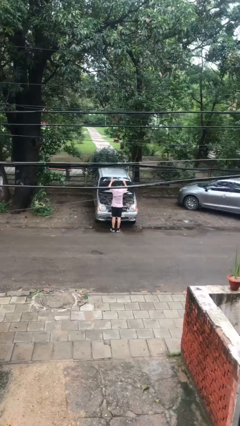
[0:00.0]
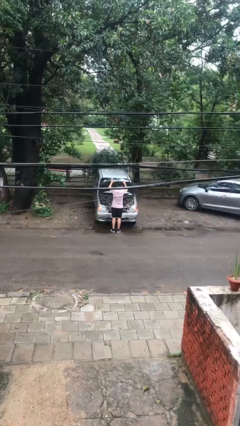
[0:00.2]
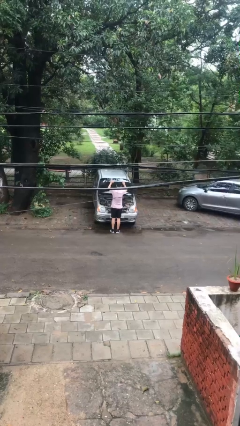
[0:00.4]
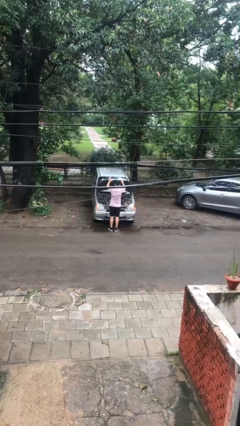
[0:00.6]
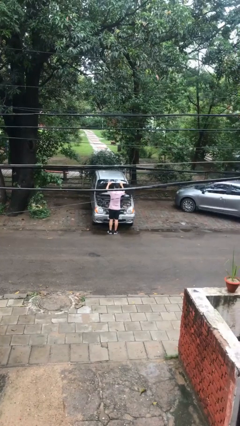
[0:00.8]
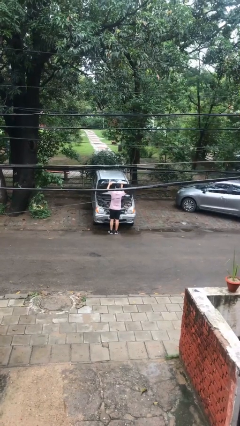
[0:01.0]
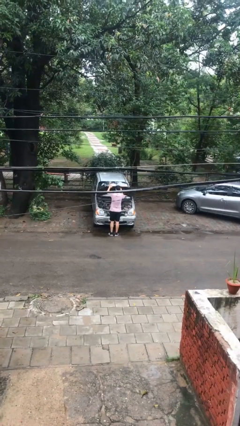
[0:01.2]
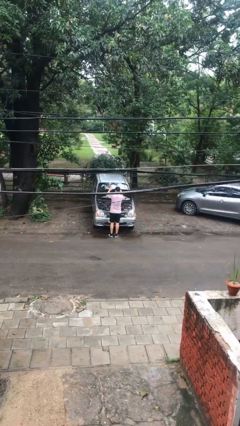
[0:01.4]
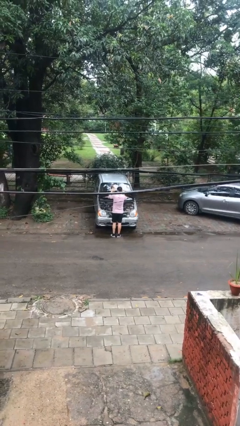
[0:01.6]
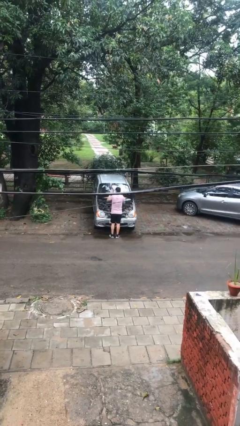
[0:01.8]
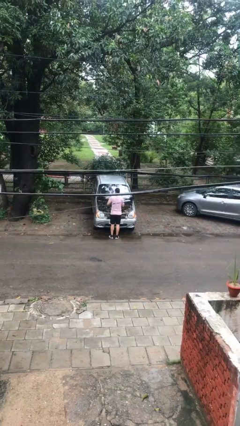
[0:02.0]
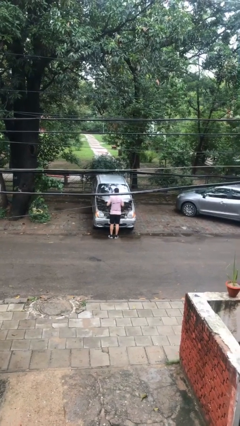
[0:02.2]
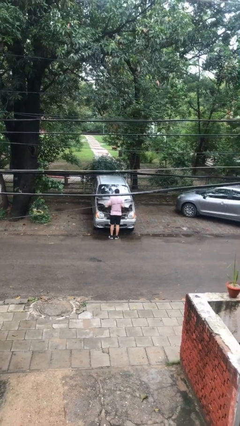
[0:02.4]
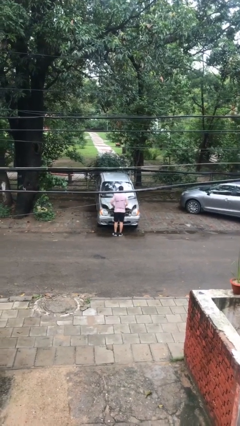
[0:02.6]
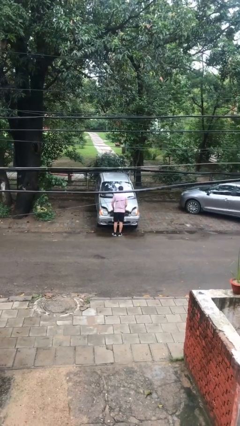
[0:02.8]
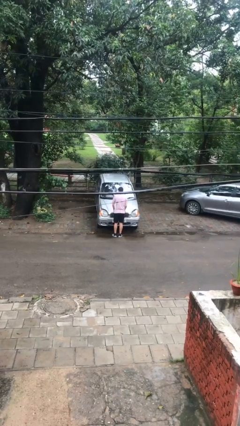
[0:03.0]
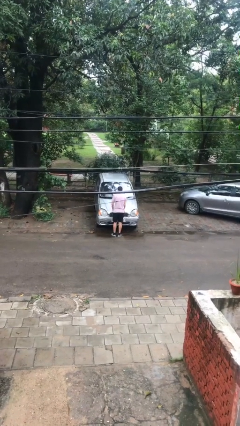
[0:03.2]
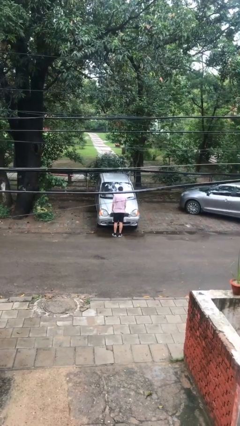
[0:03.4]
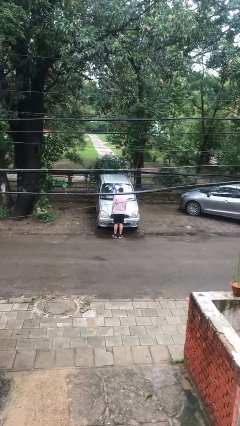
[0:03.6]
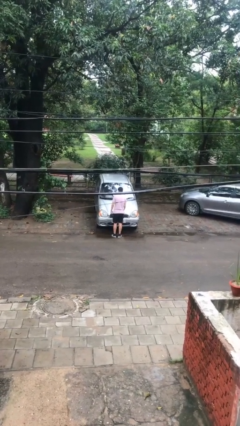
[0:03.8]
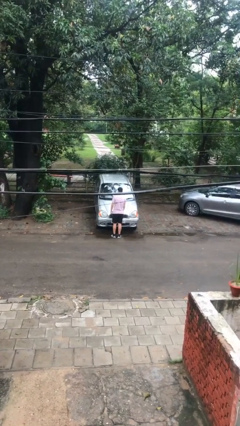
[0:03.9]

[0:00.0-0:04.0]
person closes car hood

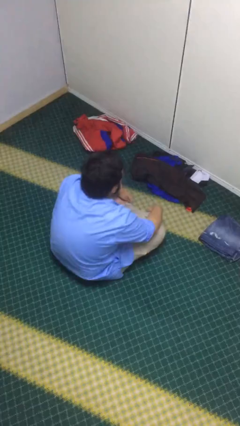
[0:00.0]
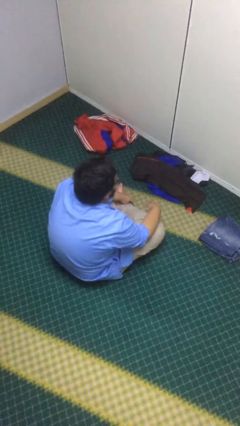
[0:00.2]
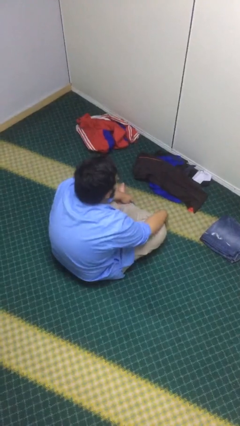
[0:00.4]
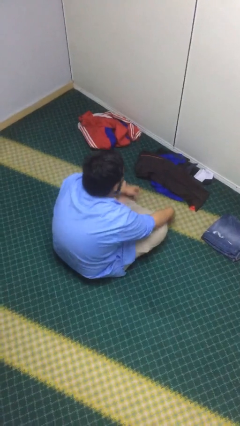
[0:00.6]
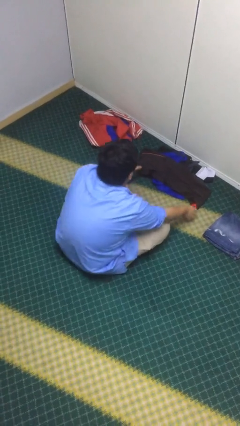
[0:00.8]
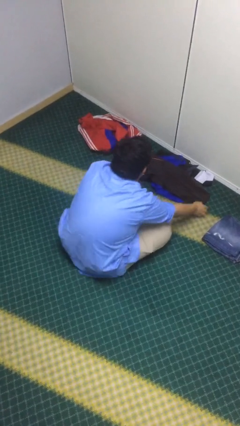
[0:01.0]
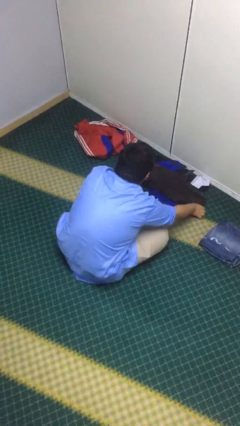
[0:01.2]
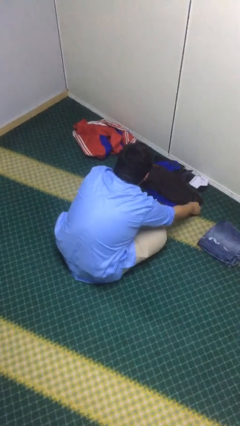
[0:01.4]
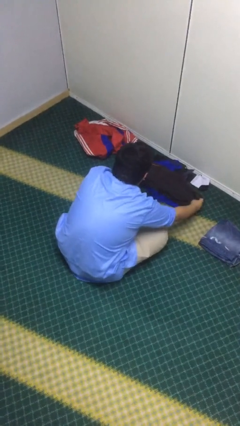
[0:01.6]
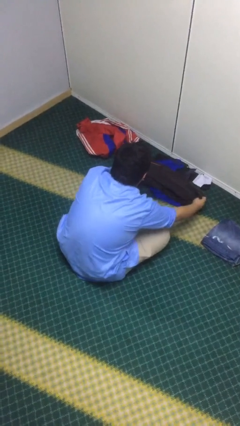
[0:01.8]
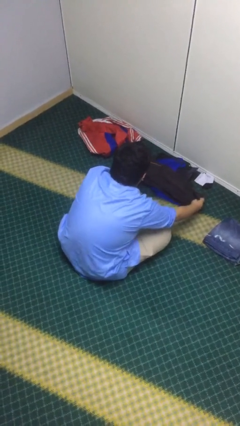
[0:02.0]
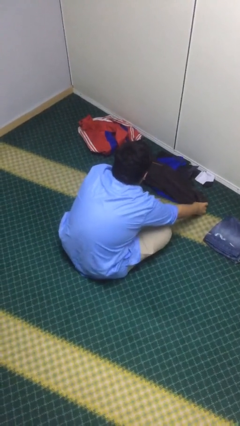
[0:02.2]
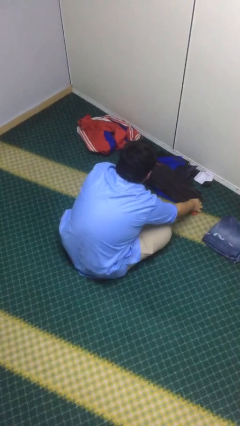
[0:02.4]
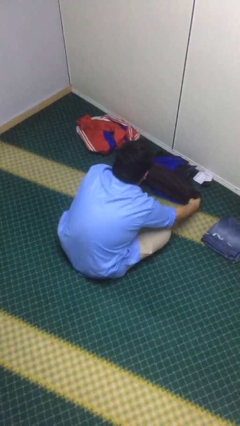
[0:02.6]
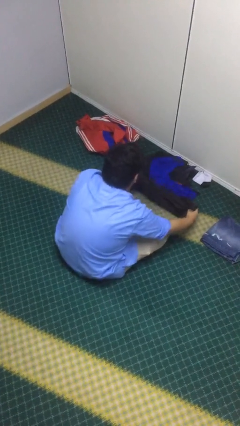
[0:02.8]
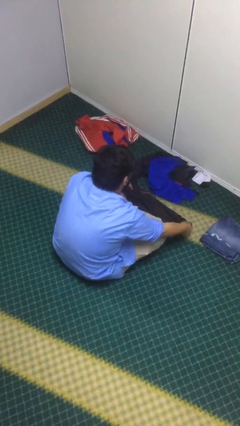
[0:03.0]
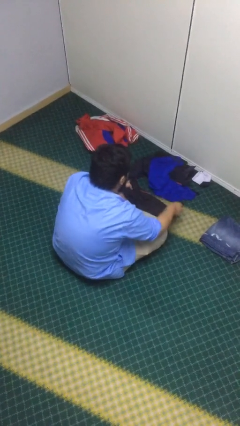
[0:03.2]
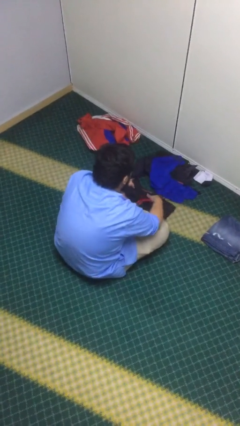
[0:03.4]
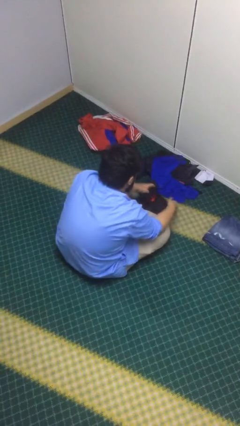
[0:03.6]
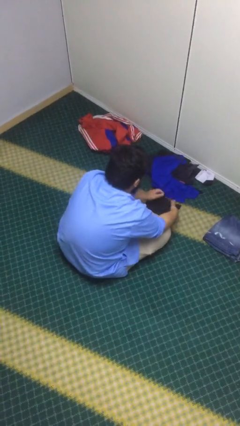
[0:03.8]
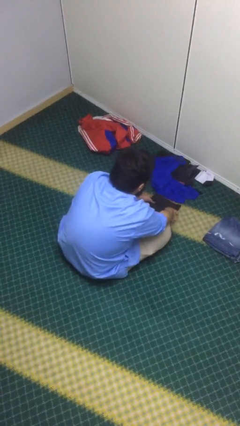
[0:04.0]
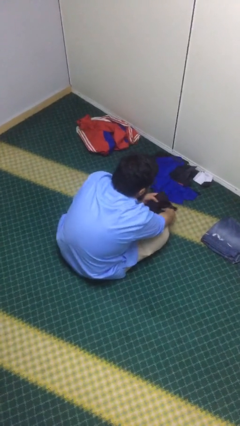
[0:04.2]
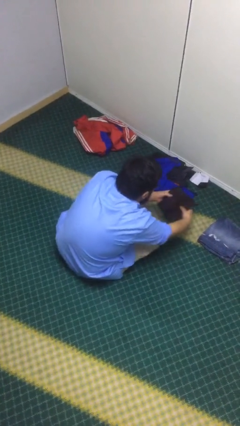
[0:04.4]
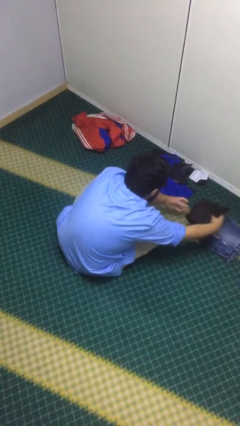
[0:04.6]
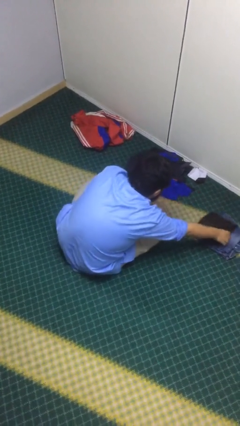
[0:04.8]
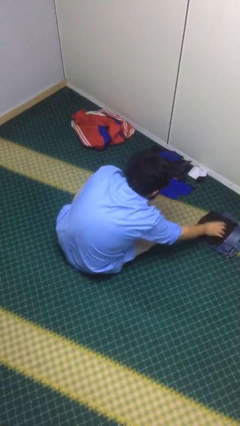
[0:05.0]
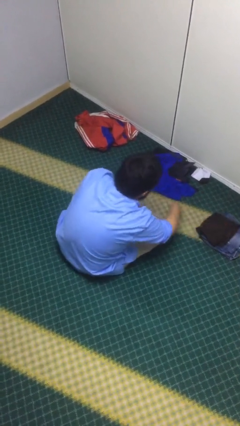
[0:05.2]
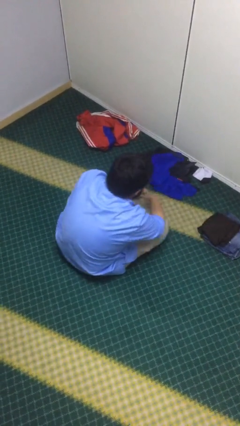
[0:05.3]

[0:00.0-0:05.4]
person folds shirt

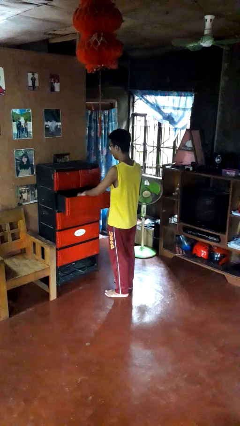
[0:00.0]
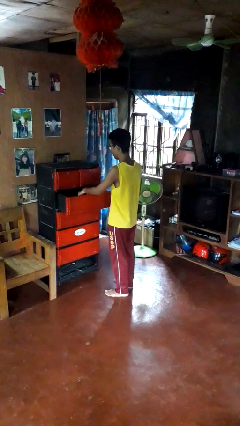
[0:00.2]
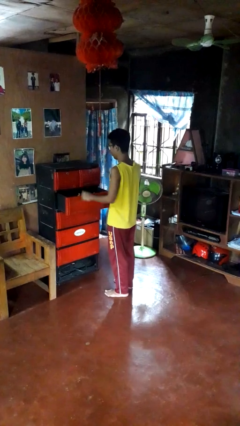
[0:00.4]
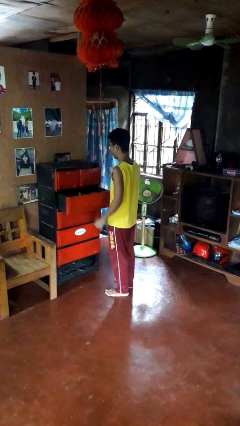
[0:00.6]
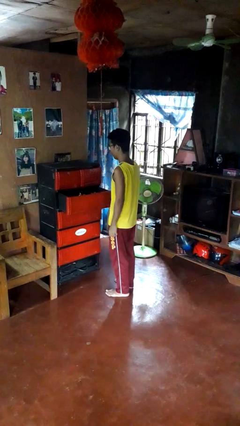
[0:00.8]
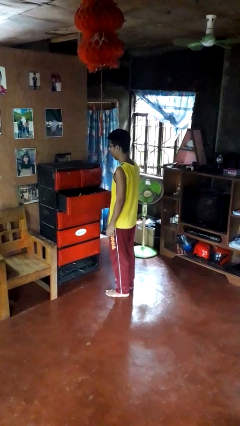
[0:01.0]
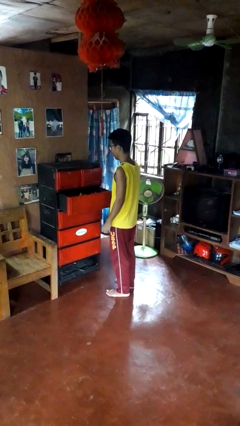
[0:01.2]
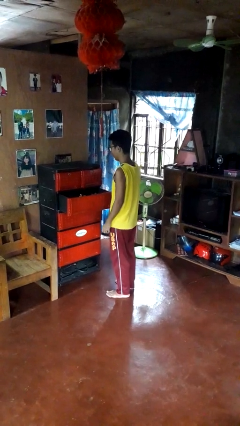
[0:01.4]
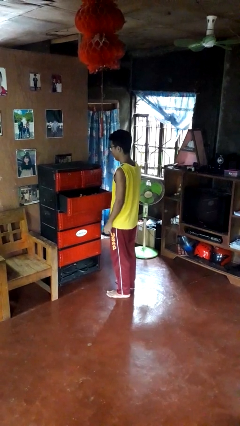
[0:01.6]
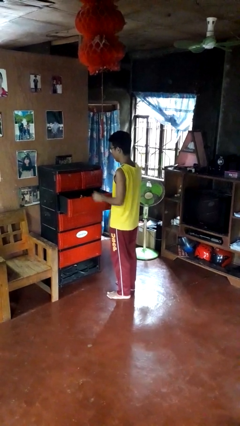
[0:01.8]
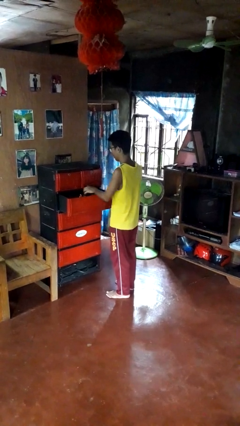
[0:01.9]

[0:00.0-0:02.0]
person puts clothes into dresser

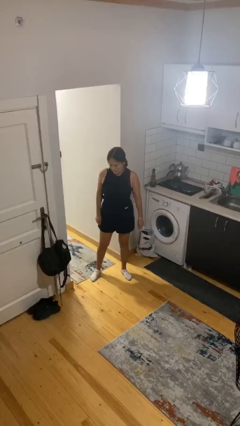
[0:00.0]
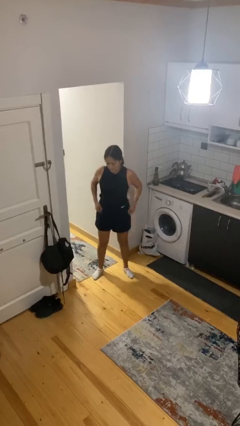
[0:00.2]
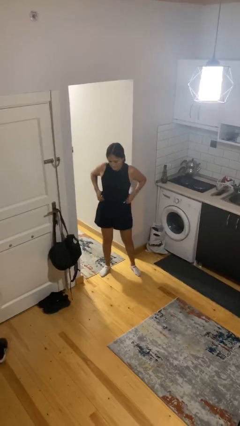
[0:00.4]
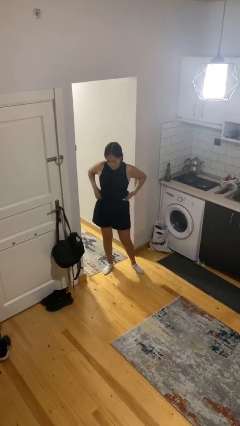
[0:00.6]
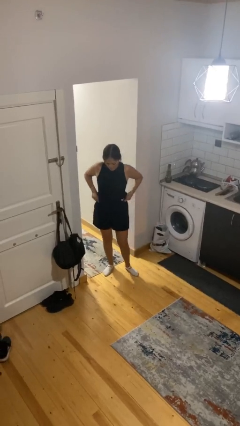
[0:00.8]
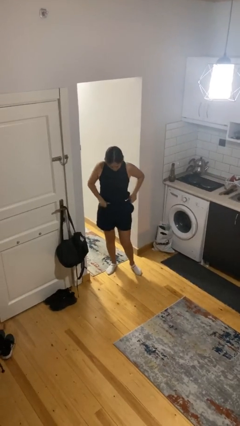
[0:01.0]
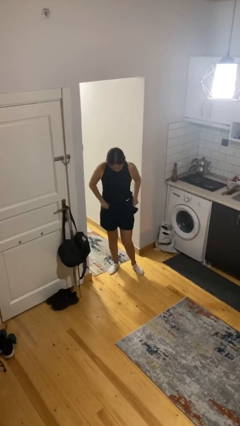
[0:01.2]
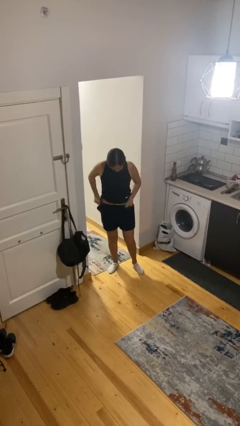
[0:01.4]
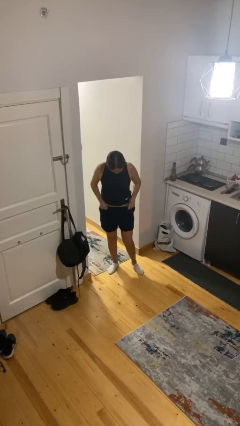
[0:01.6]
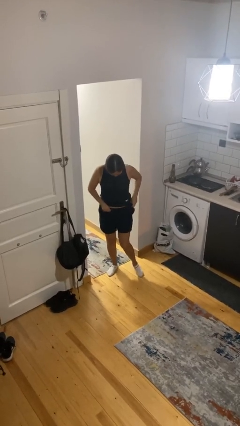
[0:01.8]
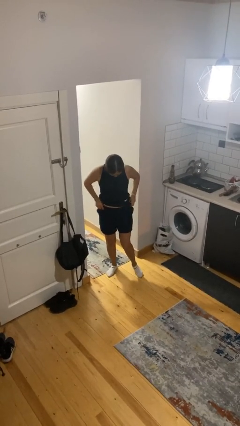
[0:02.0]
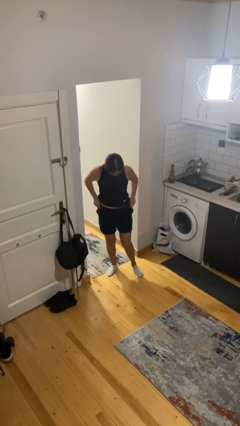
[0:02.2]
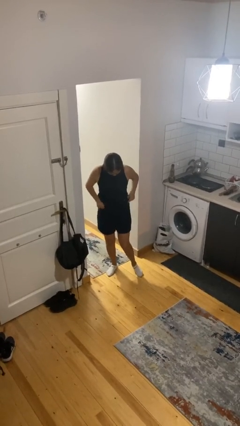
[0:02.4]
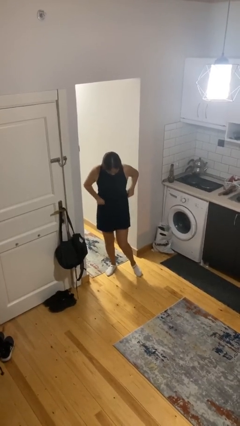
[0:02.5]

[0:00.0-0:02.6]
person hikes up pants

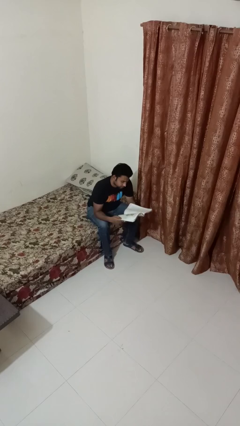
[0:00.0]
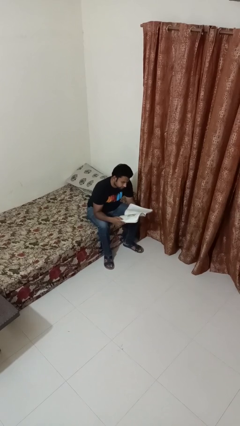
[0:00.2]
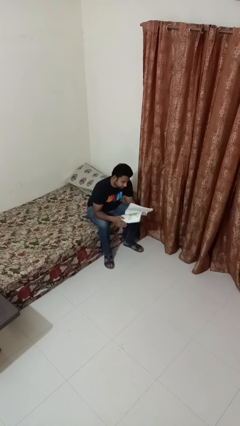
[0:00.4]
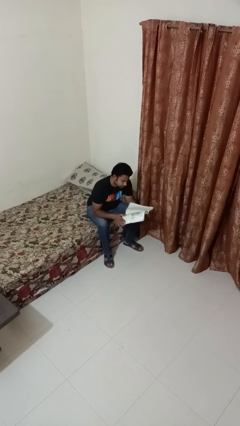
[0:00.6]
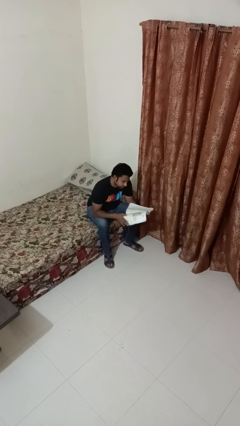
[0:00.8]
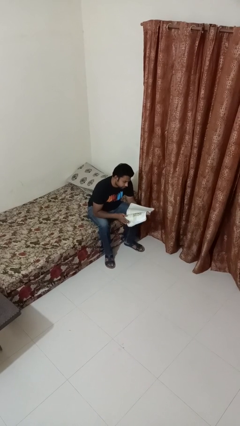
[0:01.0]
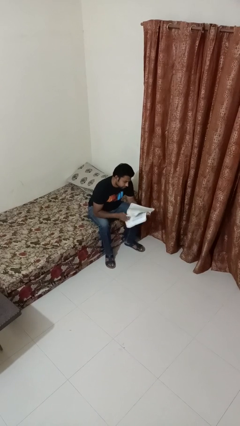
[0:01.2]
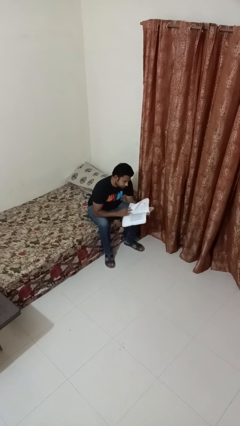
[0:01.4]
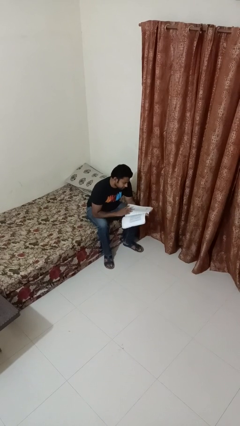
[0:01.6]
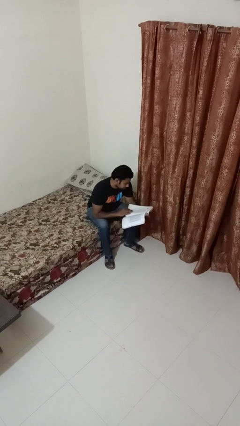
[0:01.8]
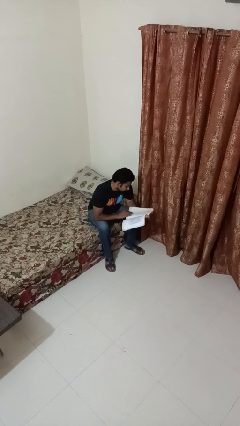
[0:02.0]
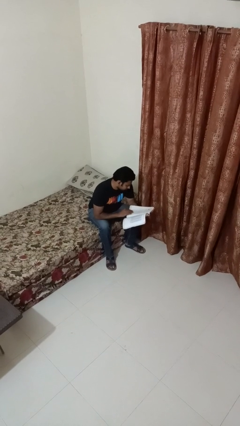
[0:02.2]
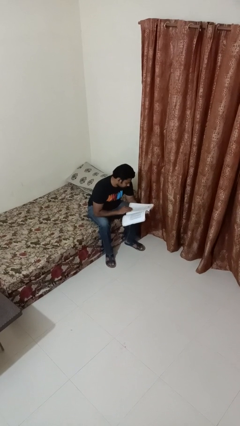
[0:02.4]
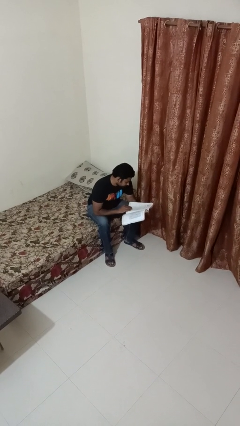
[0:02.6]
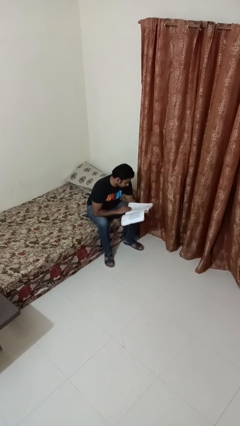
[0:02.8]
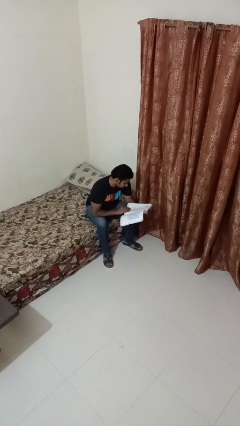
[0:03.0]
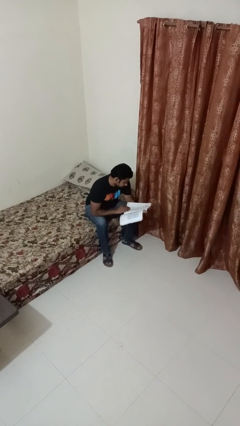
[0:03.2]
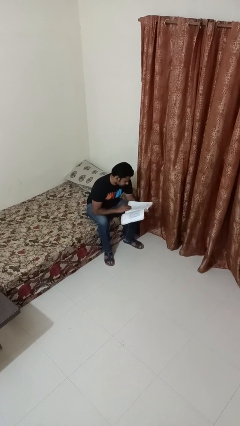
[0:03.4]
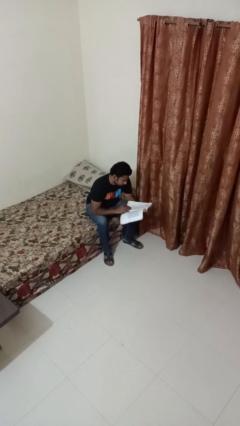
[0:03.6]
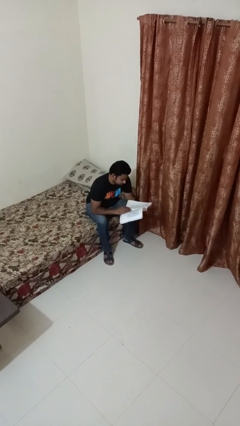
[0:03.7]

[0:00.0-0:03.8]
person reads book

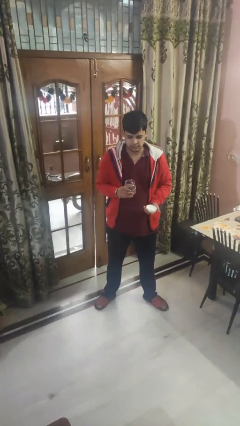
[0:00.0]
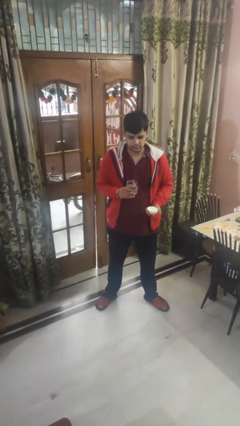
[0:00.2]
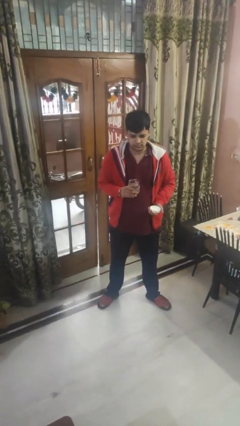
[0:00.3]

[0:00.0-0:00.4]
person opens jar
